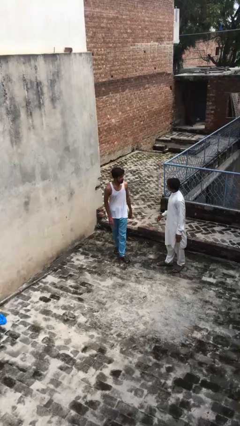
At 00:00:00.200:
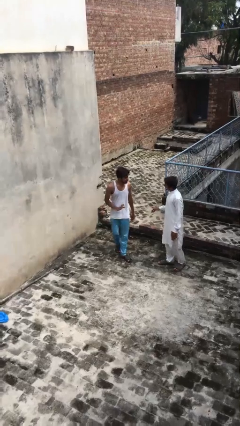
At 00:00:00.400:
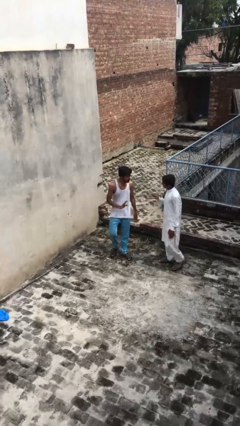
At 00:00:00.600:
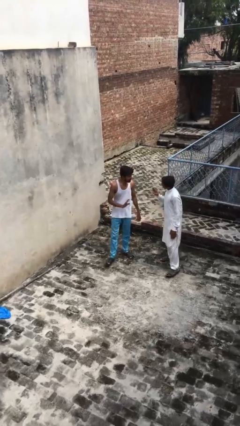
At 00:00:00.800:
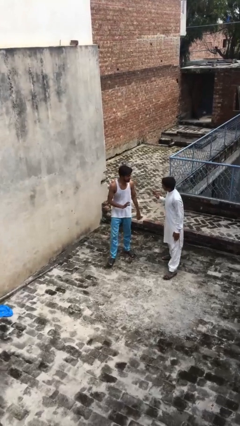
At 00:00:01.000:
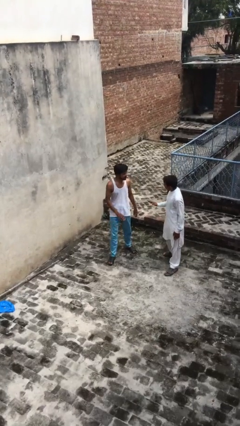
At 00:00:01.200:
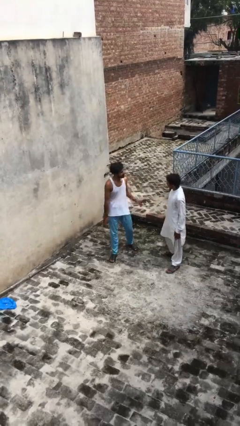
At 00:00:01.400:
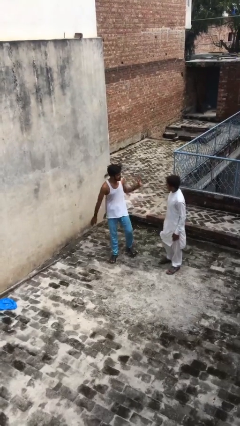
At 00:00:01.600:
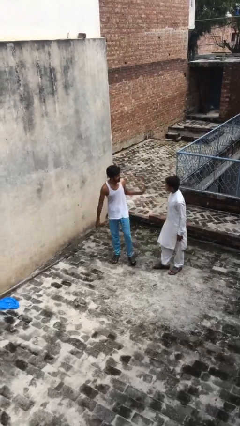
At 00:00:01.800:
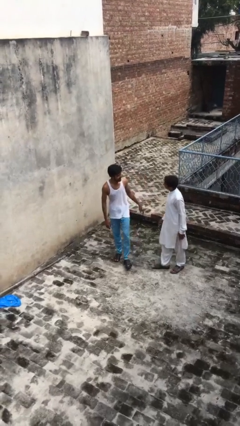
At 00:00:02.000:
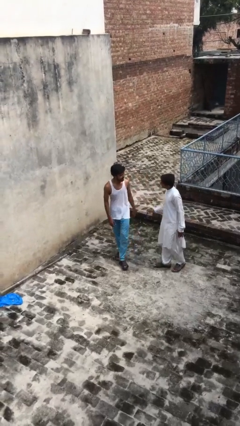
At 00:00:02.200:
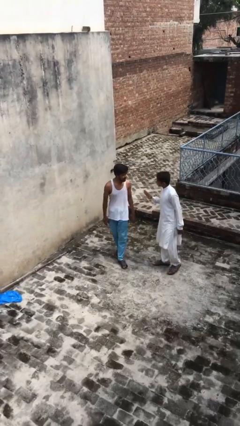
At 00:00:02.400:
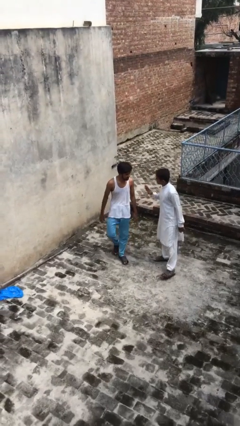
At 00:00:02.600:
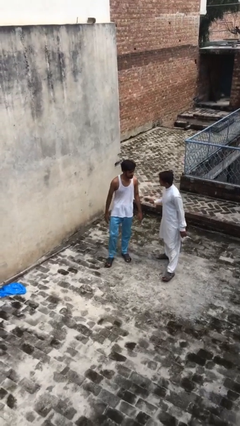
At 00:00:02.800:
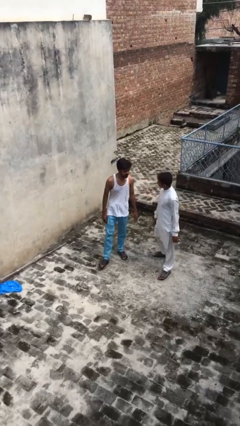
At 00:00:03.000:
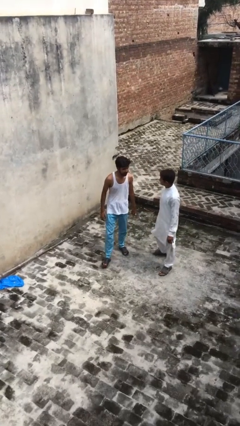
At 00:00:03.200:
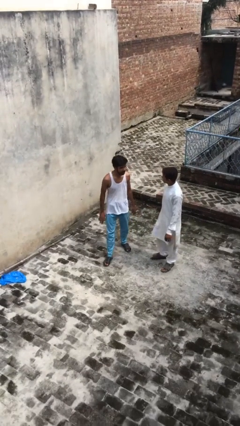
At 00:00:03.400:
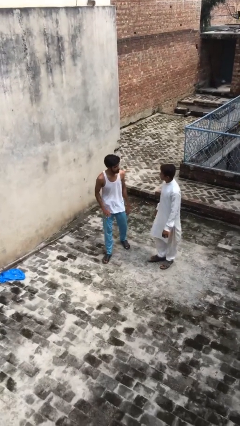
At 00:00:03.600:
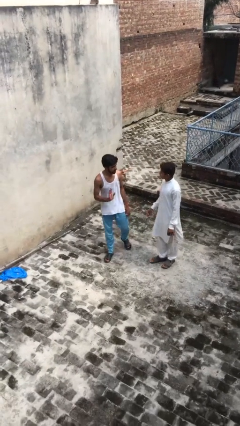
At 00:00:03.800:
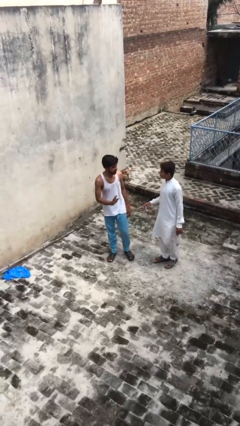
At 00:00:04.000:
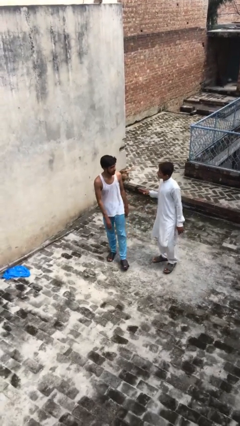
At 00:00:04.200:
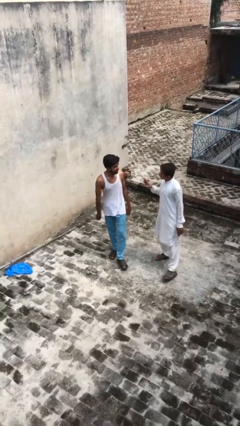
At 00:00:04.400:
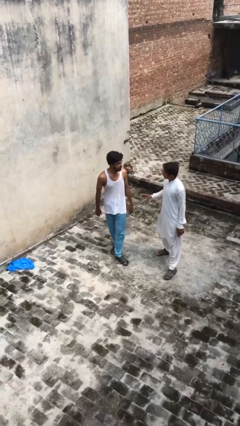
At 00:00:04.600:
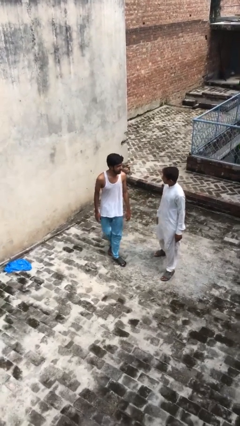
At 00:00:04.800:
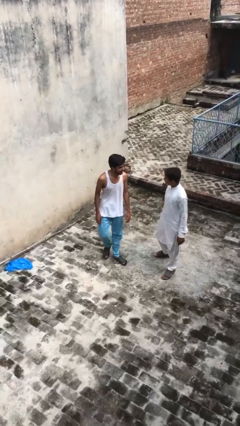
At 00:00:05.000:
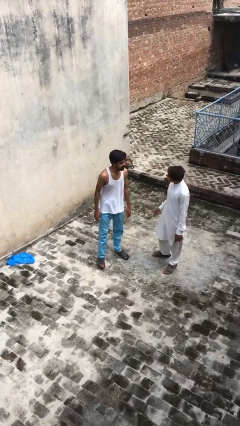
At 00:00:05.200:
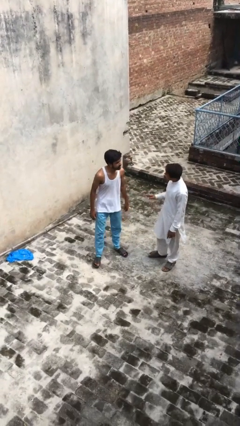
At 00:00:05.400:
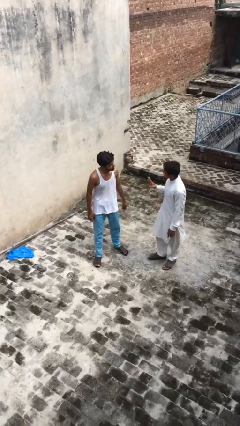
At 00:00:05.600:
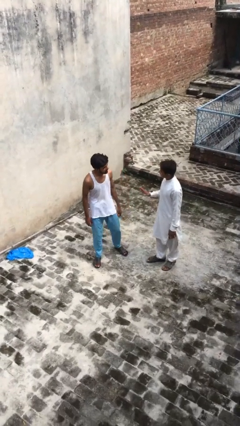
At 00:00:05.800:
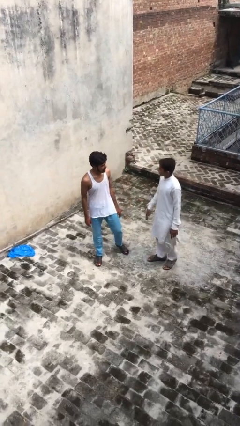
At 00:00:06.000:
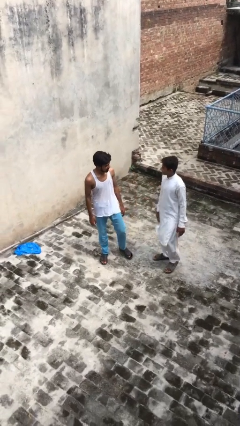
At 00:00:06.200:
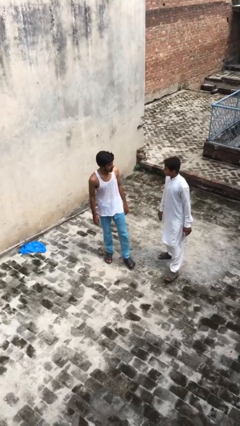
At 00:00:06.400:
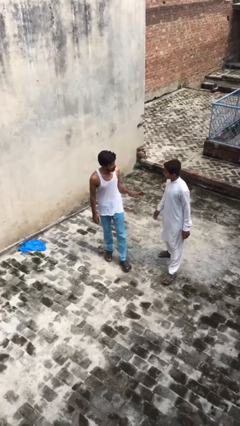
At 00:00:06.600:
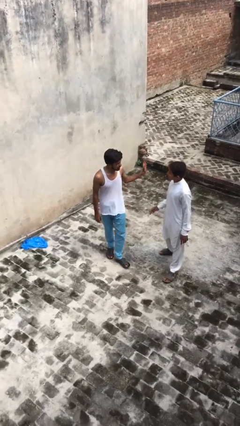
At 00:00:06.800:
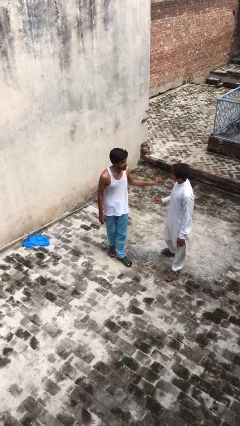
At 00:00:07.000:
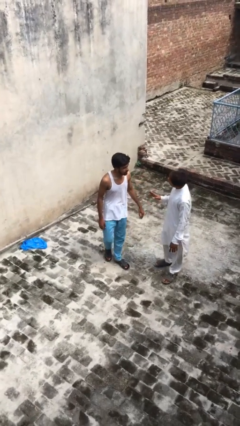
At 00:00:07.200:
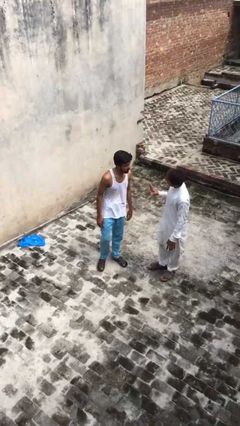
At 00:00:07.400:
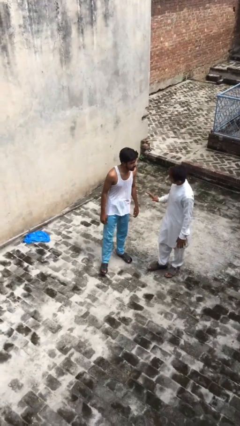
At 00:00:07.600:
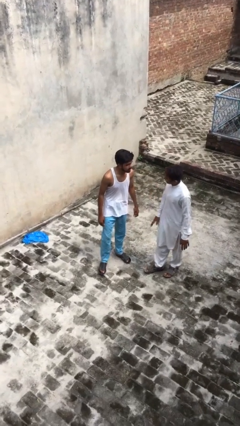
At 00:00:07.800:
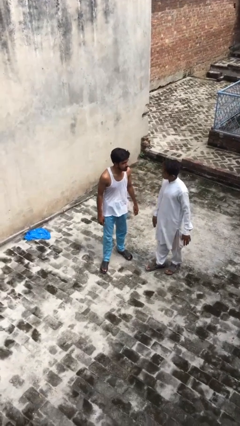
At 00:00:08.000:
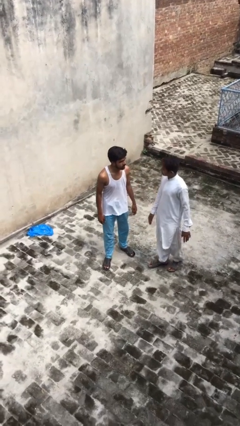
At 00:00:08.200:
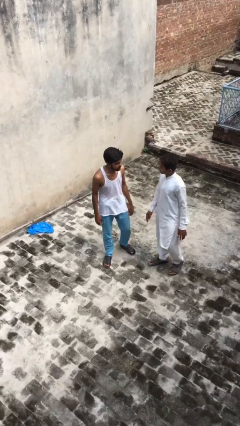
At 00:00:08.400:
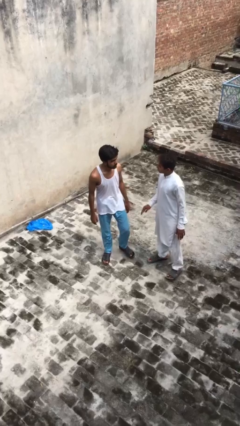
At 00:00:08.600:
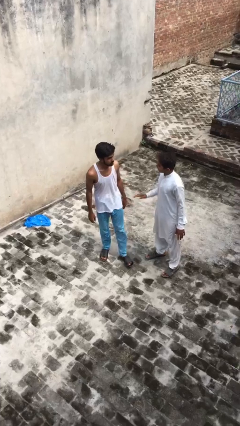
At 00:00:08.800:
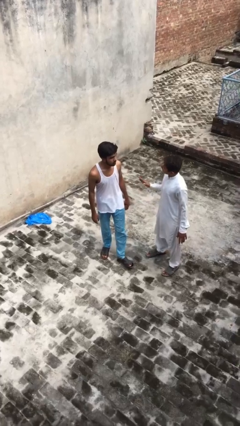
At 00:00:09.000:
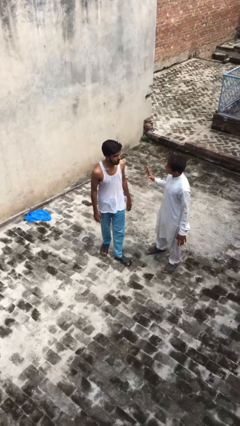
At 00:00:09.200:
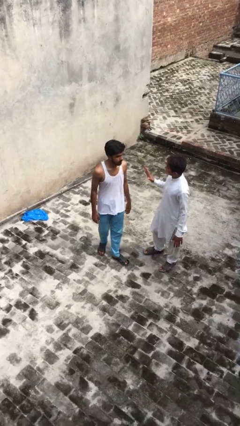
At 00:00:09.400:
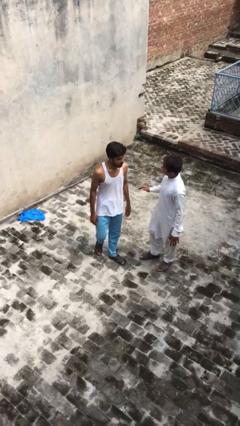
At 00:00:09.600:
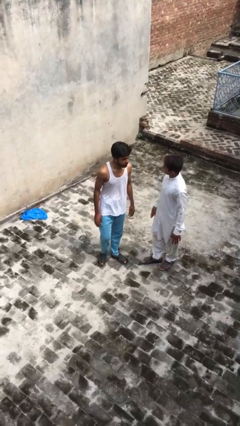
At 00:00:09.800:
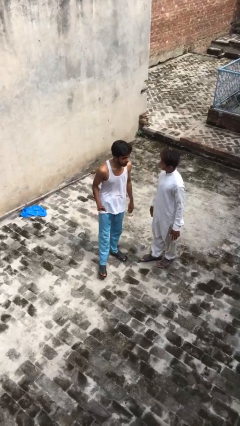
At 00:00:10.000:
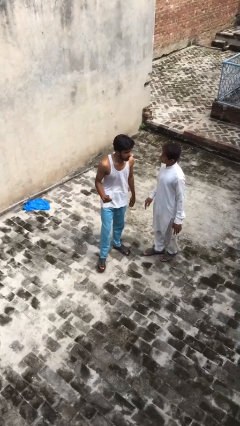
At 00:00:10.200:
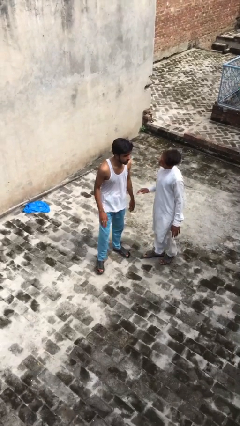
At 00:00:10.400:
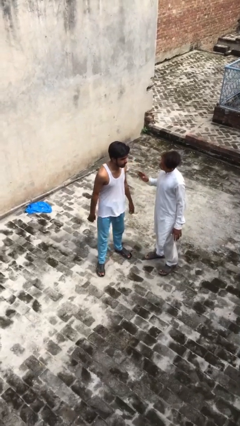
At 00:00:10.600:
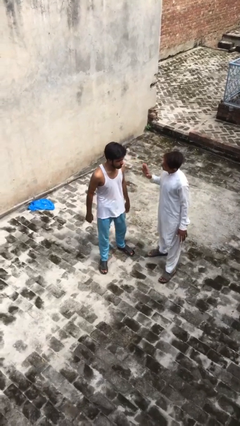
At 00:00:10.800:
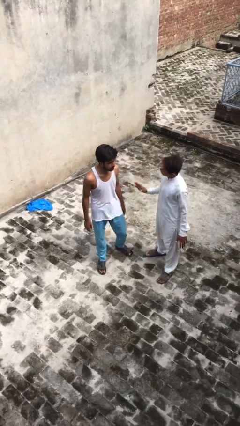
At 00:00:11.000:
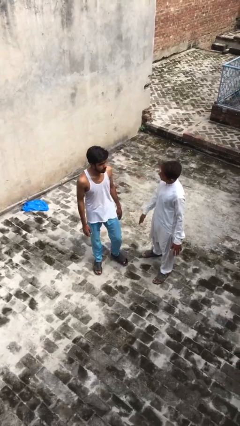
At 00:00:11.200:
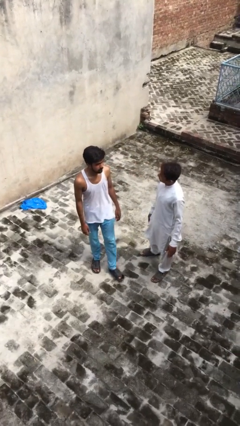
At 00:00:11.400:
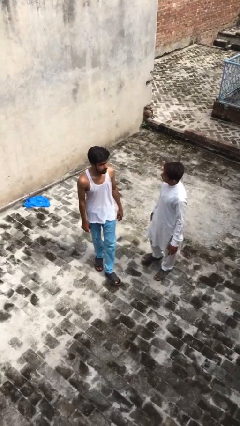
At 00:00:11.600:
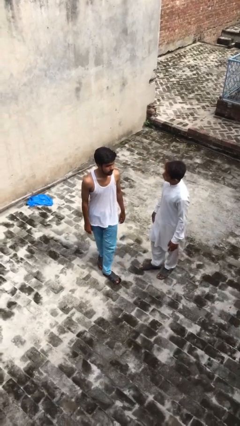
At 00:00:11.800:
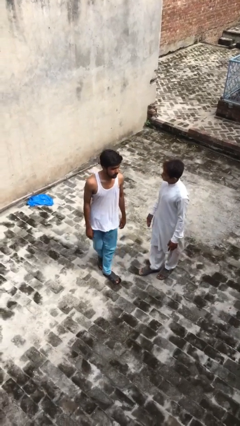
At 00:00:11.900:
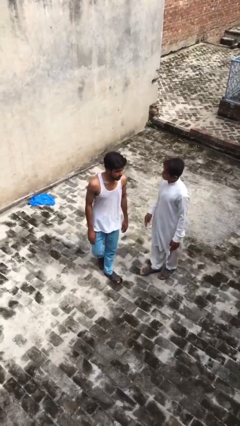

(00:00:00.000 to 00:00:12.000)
person talks to person

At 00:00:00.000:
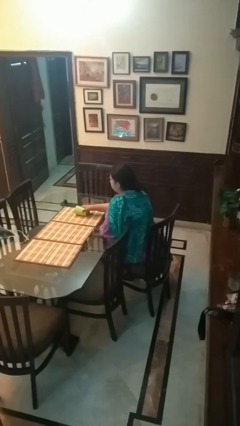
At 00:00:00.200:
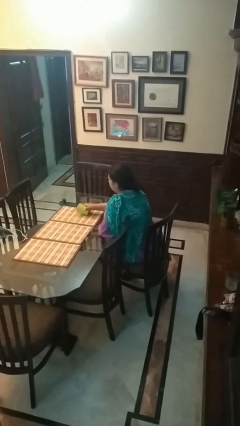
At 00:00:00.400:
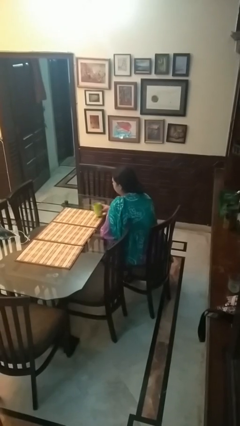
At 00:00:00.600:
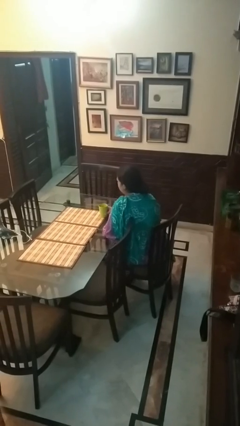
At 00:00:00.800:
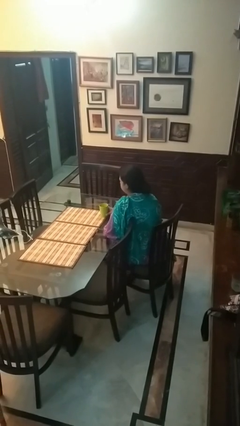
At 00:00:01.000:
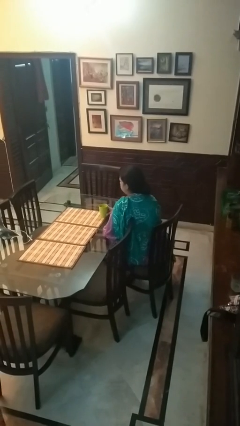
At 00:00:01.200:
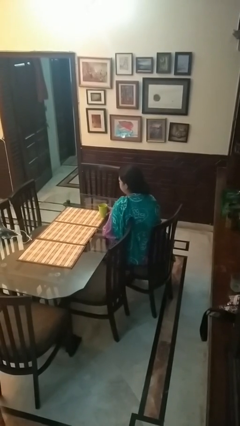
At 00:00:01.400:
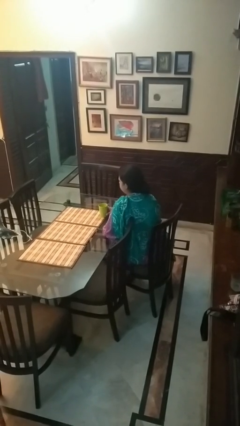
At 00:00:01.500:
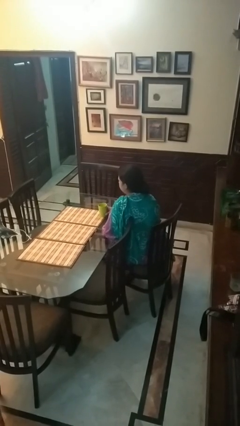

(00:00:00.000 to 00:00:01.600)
person sets upright glass

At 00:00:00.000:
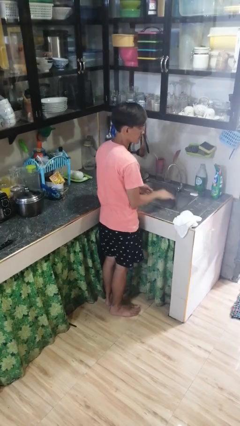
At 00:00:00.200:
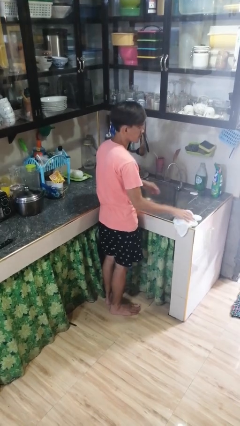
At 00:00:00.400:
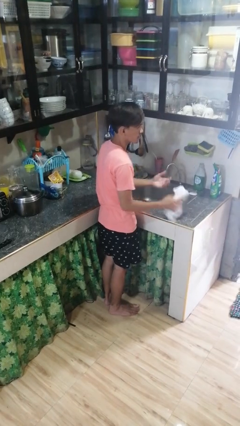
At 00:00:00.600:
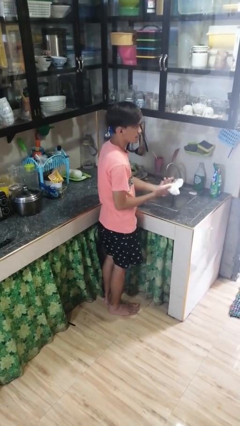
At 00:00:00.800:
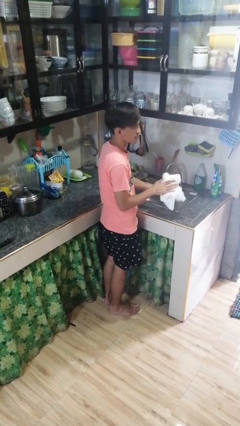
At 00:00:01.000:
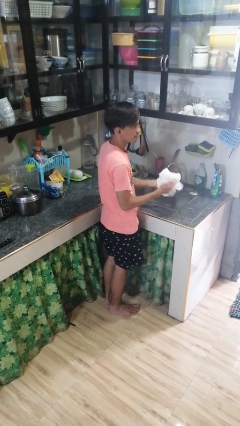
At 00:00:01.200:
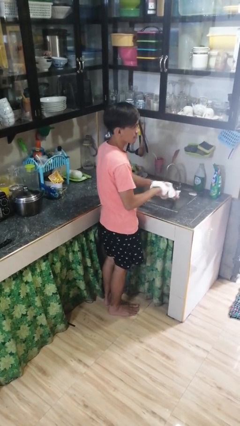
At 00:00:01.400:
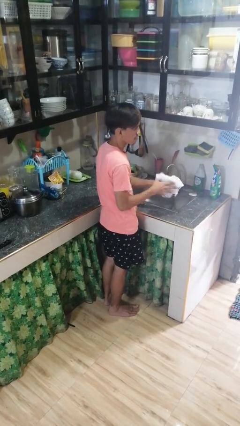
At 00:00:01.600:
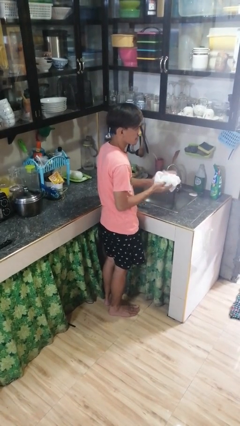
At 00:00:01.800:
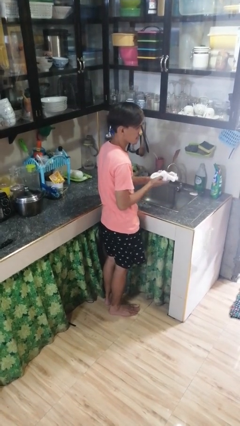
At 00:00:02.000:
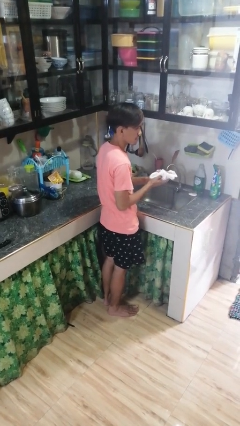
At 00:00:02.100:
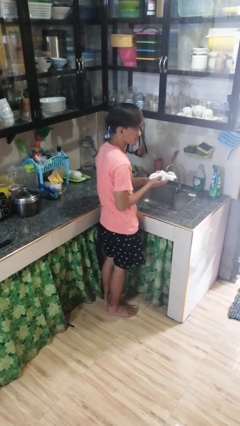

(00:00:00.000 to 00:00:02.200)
person dries hands with towel

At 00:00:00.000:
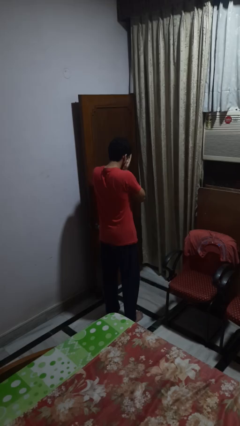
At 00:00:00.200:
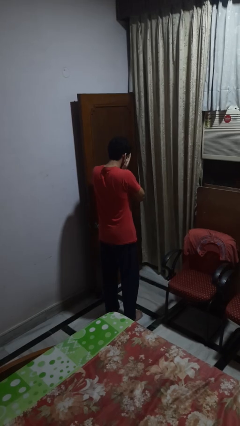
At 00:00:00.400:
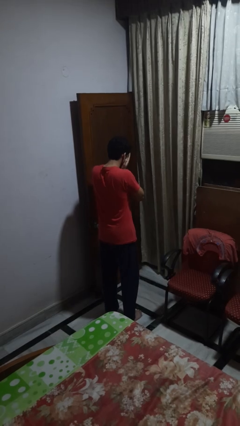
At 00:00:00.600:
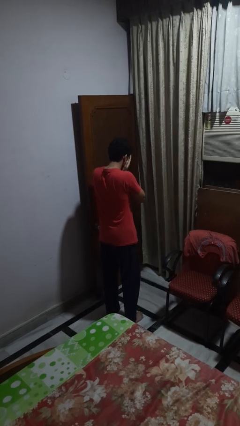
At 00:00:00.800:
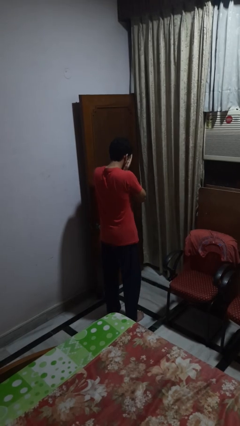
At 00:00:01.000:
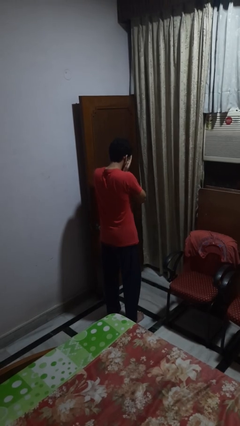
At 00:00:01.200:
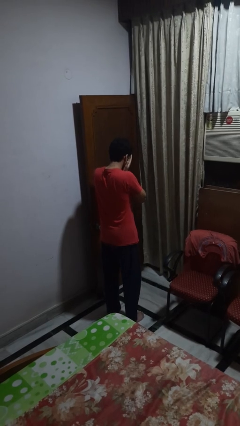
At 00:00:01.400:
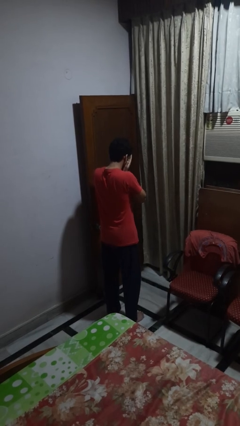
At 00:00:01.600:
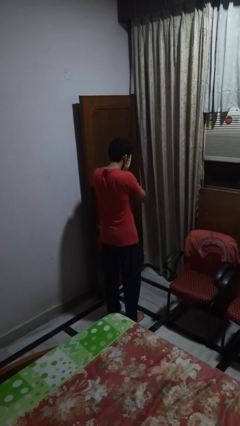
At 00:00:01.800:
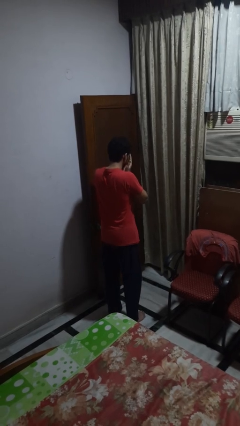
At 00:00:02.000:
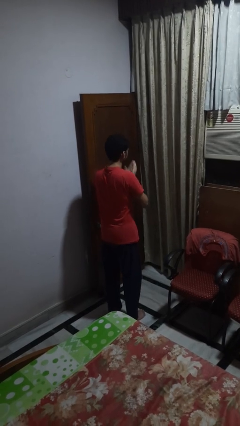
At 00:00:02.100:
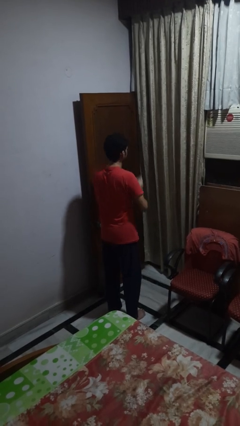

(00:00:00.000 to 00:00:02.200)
person covers face with hands
